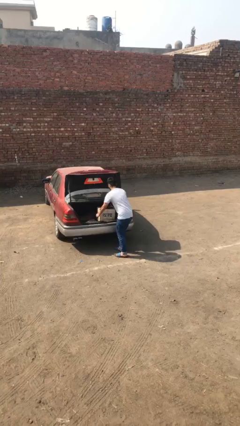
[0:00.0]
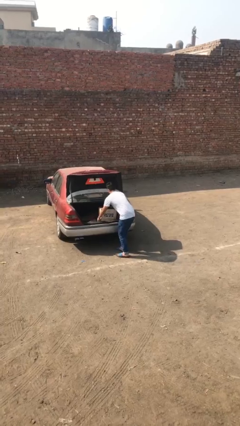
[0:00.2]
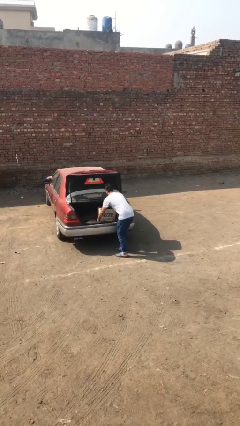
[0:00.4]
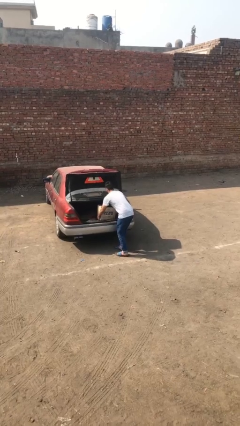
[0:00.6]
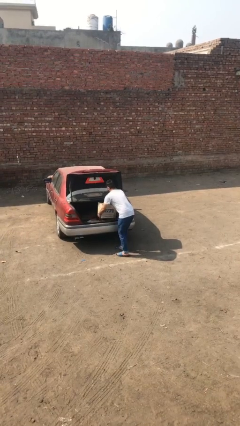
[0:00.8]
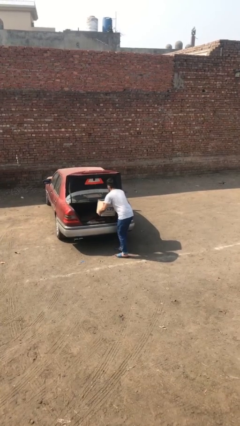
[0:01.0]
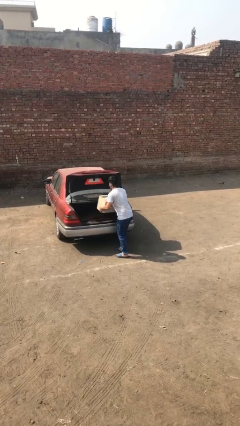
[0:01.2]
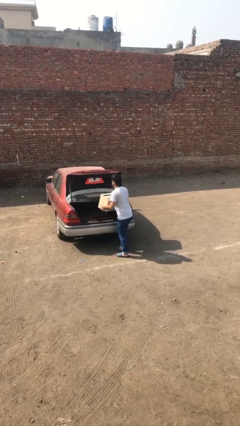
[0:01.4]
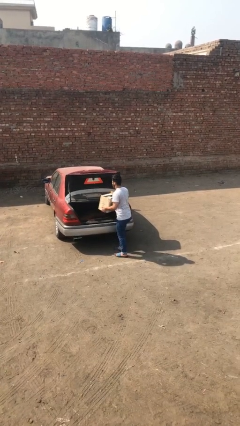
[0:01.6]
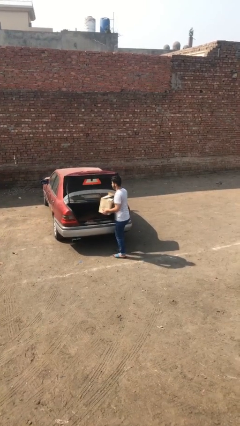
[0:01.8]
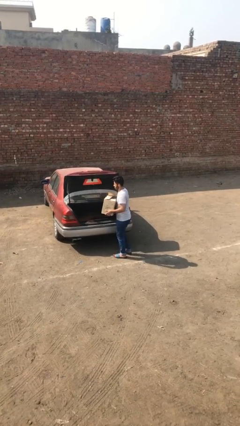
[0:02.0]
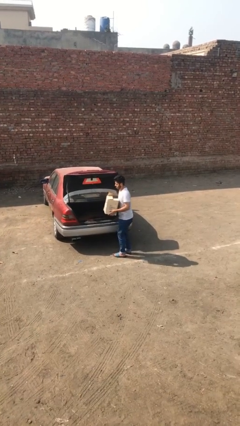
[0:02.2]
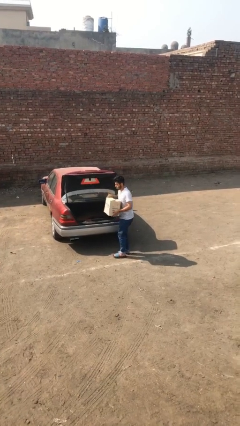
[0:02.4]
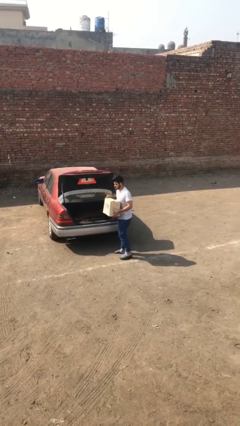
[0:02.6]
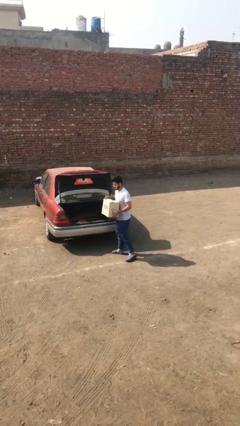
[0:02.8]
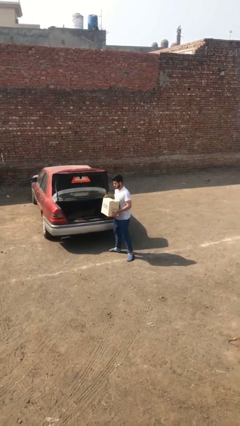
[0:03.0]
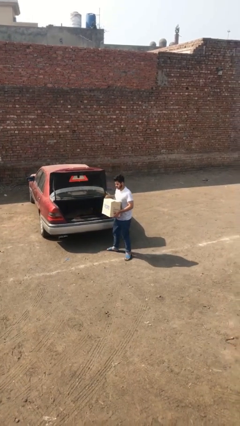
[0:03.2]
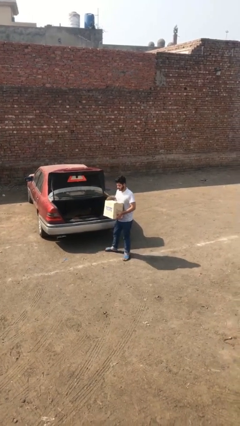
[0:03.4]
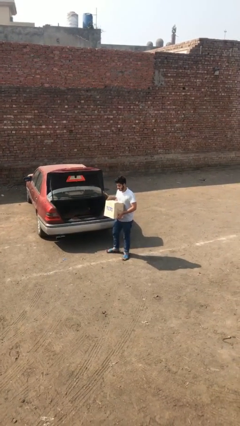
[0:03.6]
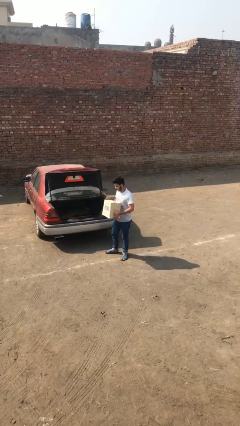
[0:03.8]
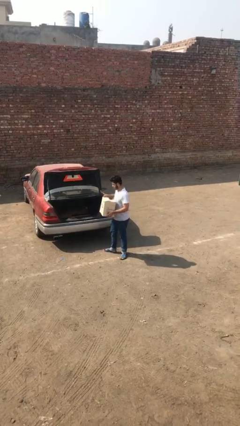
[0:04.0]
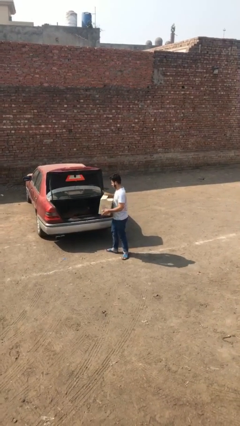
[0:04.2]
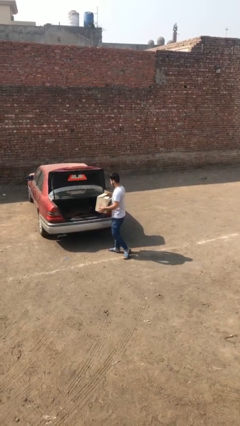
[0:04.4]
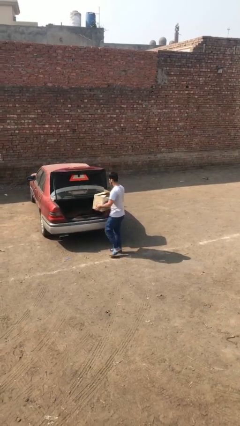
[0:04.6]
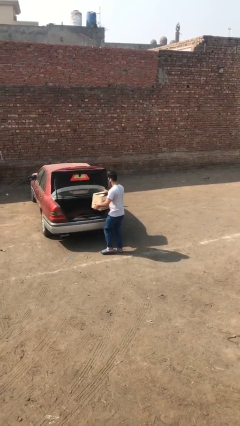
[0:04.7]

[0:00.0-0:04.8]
person unloads car

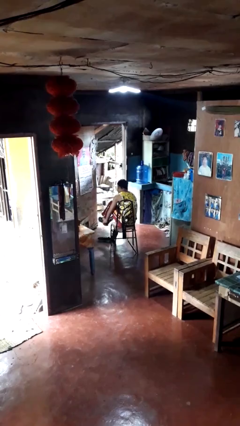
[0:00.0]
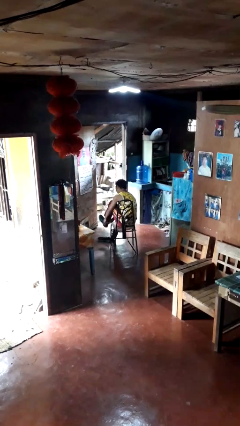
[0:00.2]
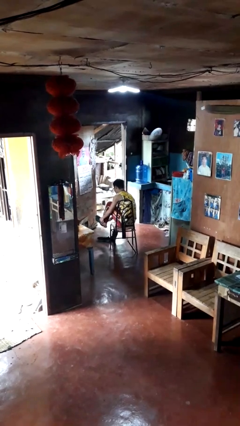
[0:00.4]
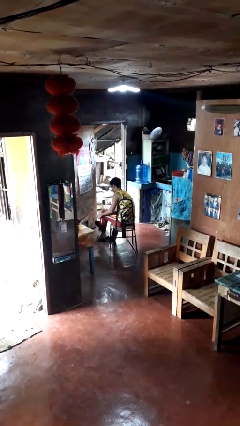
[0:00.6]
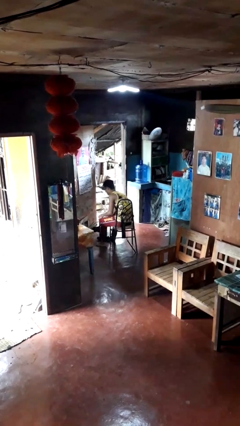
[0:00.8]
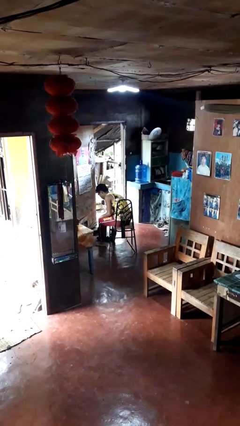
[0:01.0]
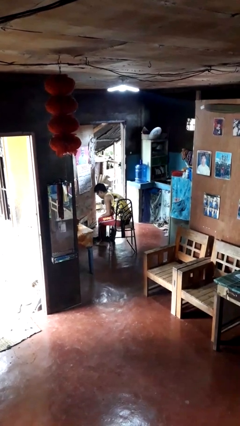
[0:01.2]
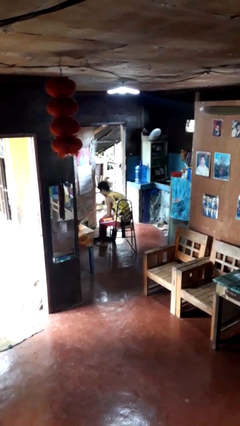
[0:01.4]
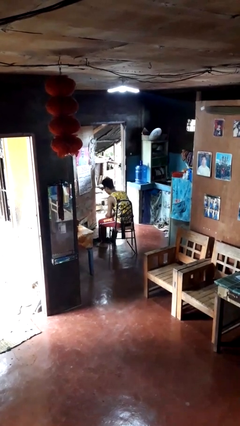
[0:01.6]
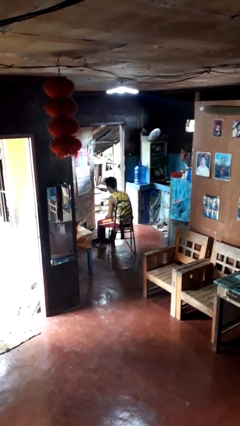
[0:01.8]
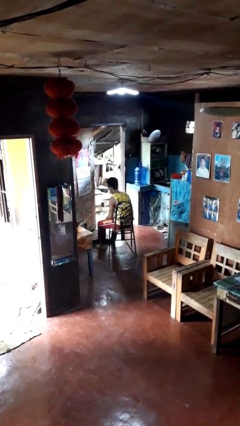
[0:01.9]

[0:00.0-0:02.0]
person takes off shoes

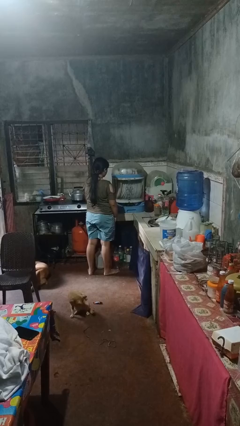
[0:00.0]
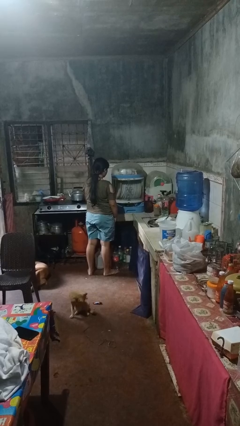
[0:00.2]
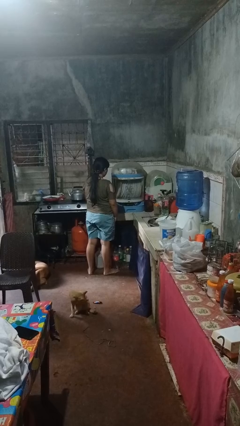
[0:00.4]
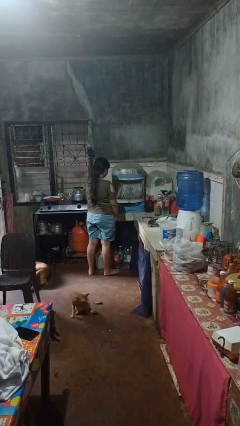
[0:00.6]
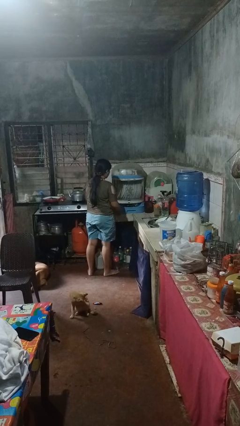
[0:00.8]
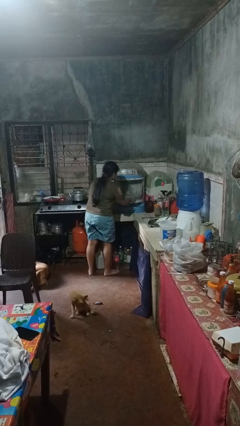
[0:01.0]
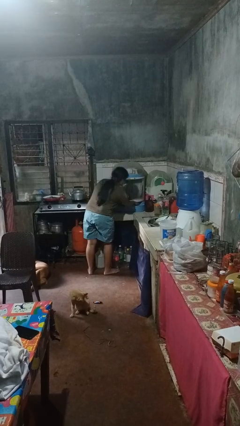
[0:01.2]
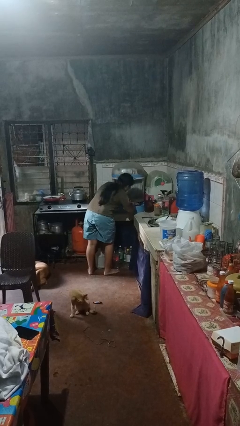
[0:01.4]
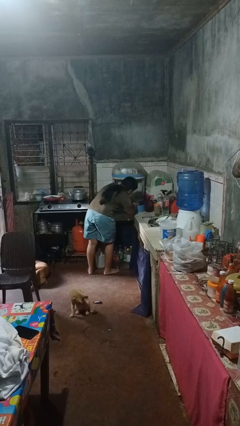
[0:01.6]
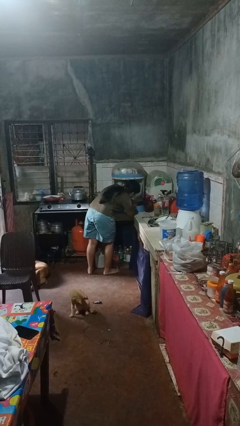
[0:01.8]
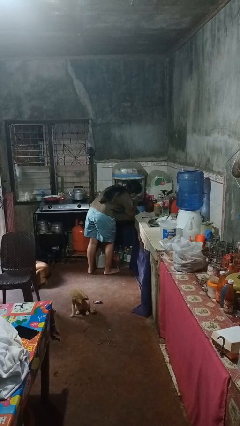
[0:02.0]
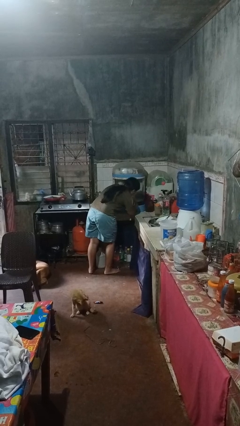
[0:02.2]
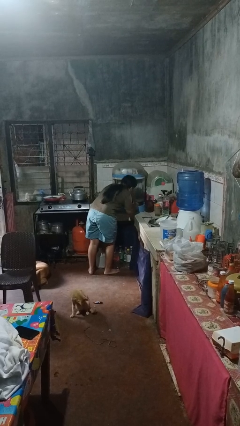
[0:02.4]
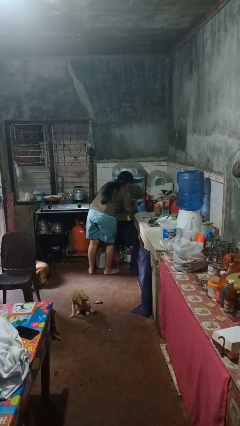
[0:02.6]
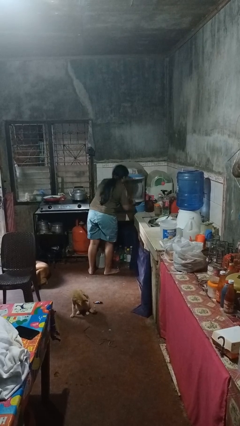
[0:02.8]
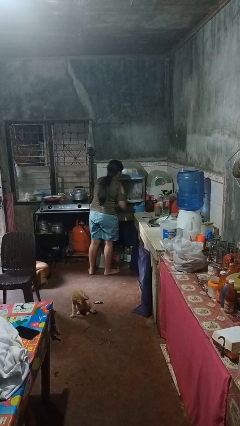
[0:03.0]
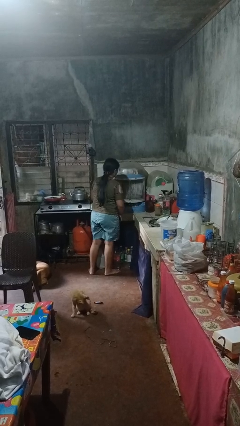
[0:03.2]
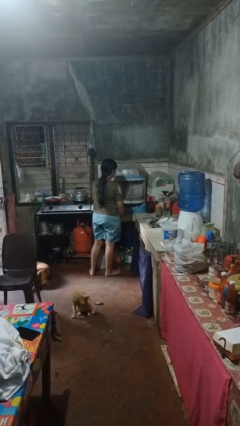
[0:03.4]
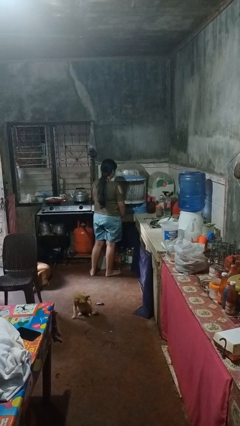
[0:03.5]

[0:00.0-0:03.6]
person searches in kitchen drawer

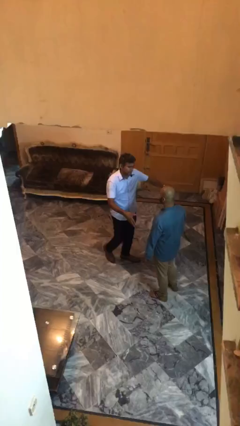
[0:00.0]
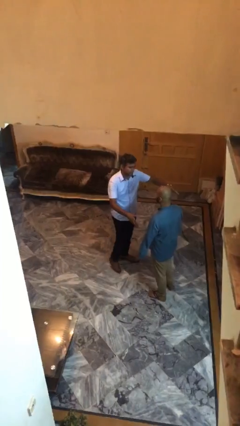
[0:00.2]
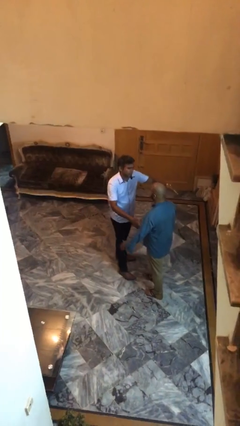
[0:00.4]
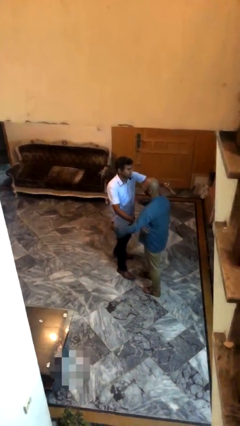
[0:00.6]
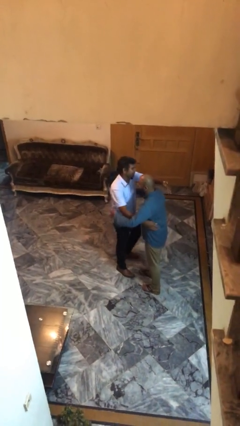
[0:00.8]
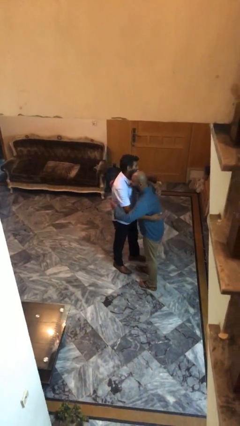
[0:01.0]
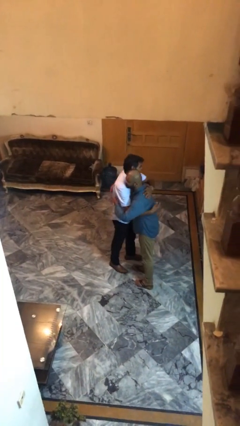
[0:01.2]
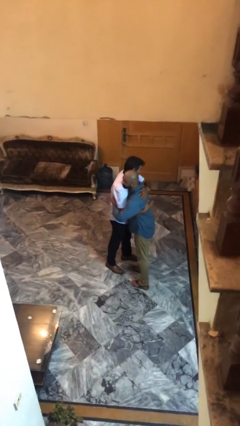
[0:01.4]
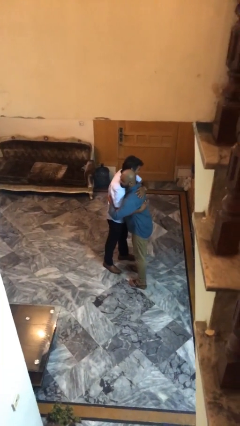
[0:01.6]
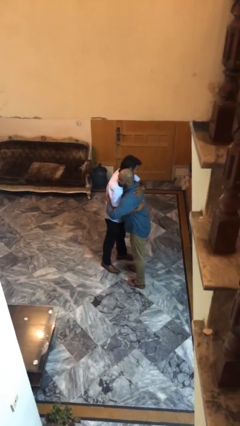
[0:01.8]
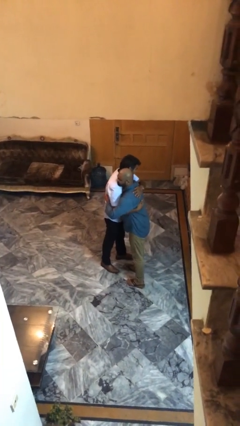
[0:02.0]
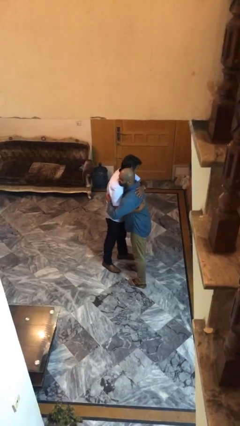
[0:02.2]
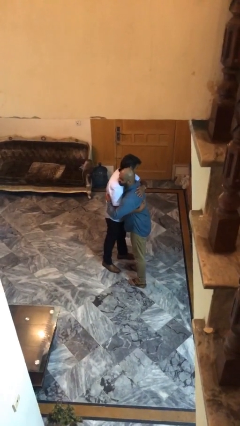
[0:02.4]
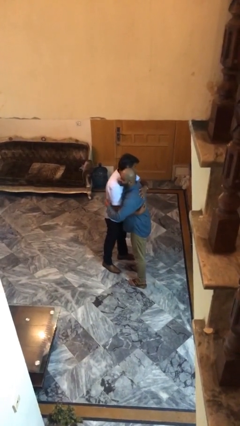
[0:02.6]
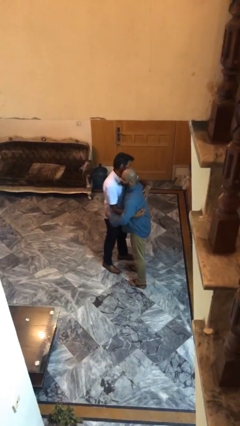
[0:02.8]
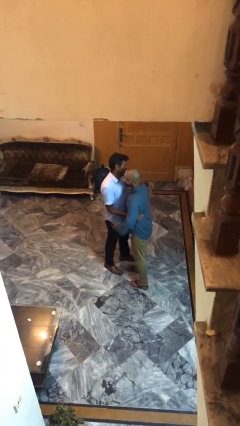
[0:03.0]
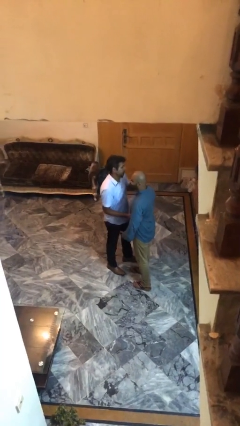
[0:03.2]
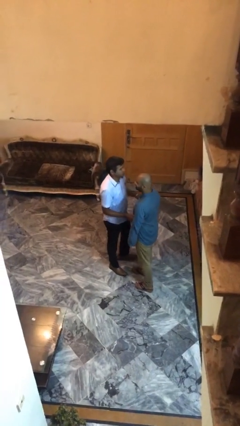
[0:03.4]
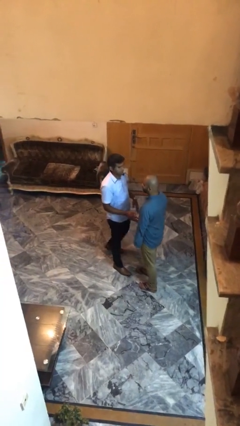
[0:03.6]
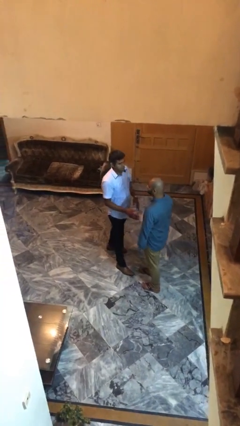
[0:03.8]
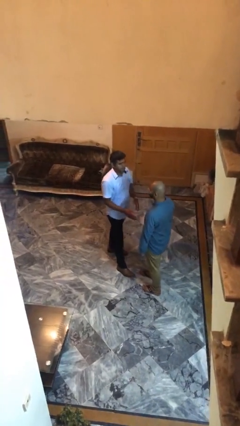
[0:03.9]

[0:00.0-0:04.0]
person embraces person

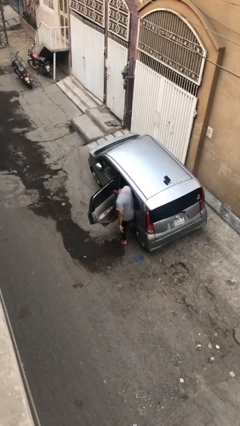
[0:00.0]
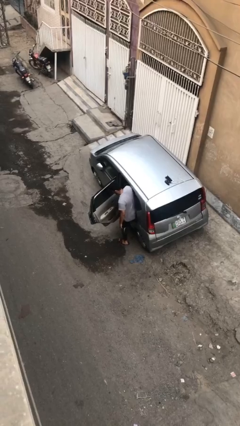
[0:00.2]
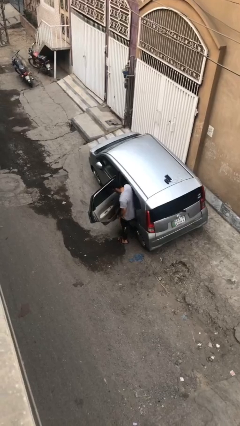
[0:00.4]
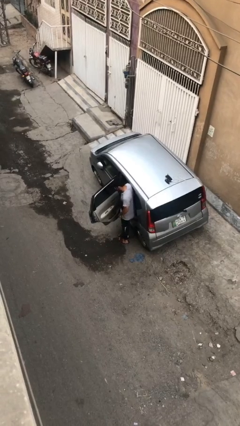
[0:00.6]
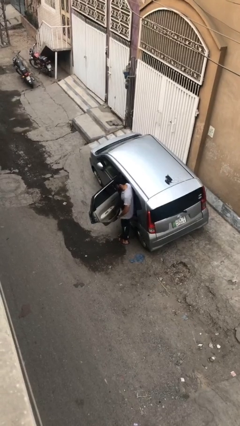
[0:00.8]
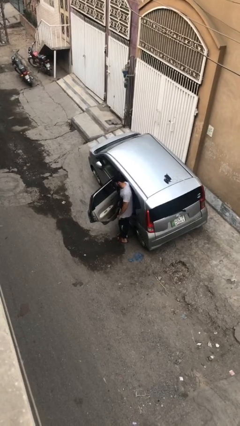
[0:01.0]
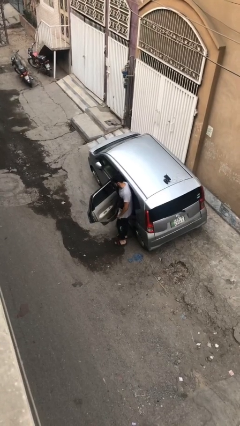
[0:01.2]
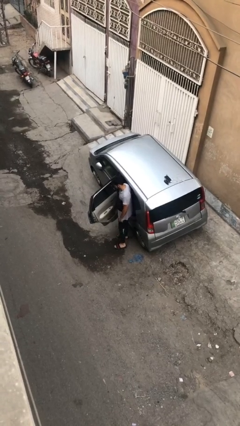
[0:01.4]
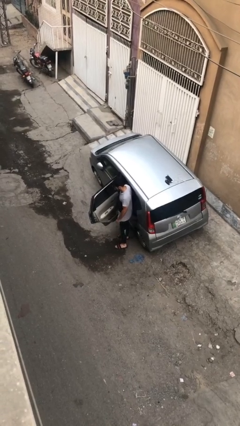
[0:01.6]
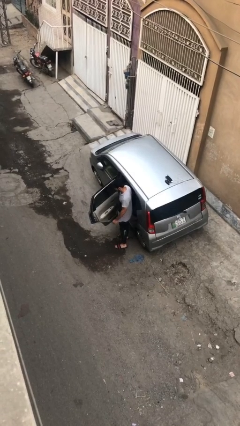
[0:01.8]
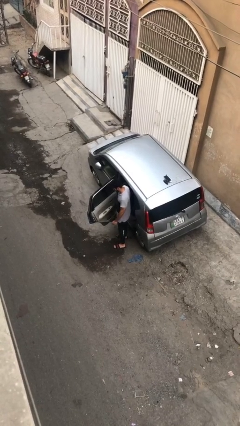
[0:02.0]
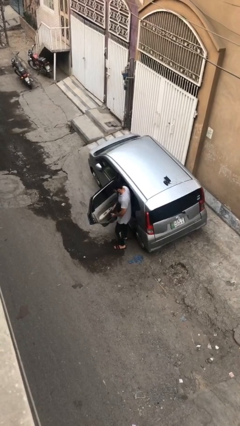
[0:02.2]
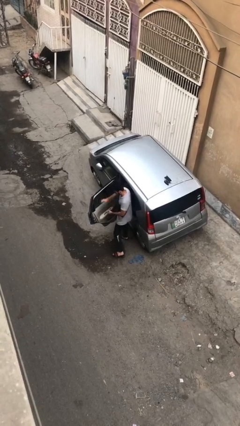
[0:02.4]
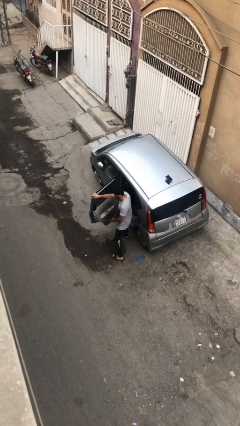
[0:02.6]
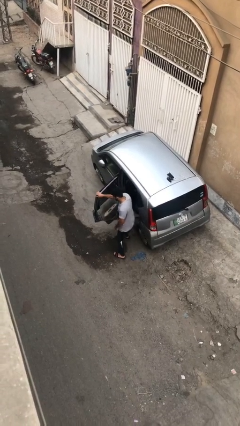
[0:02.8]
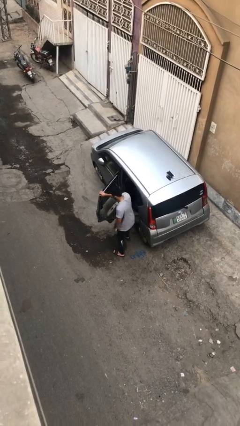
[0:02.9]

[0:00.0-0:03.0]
person exits car

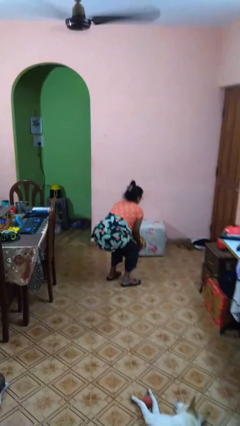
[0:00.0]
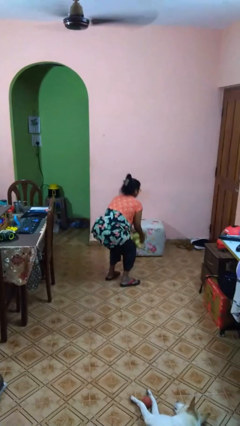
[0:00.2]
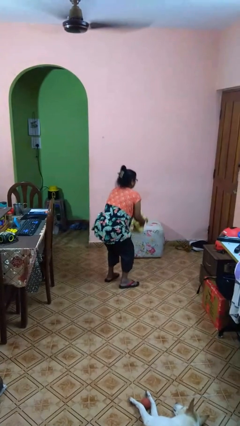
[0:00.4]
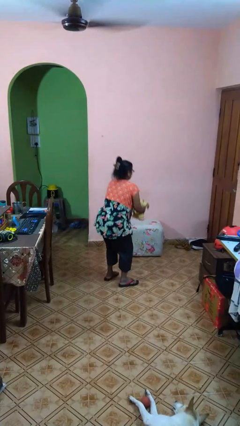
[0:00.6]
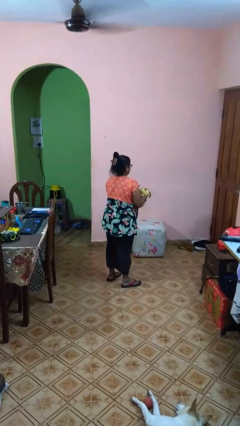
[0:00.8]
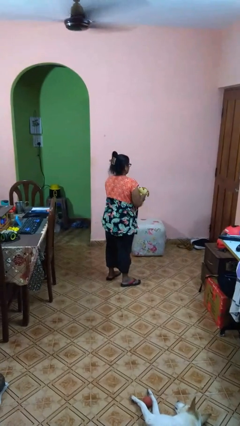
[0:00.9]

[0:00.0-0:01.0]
person catches dropped object
